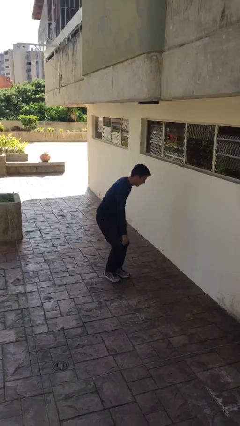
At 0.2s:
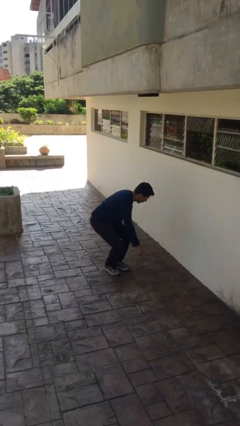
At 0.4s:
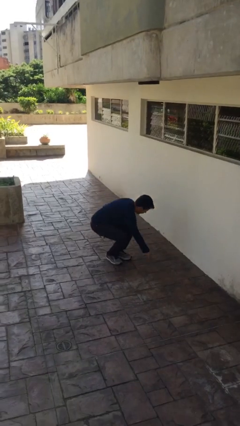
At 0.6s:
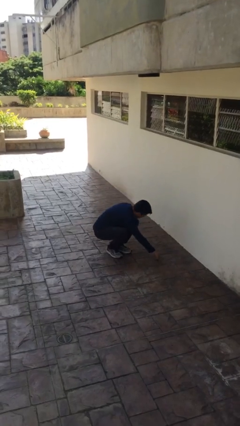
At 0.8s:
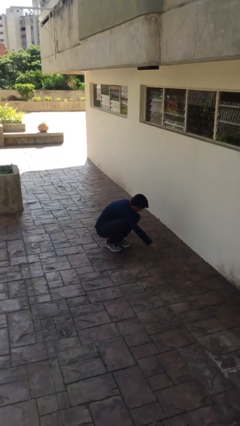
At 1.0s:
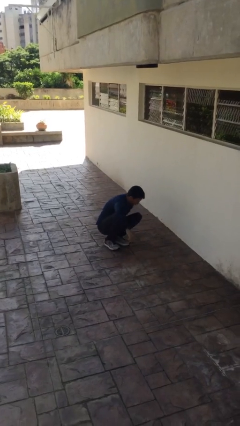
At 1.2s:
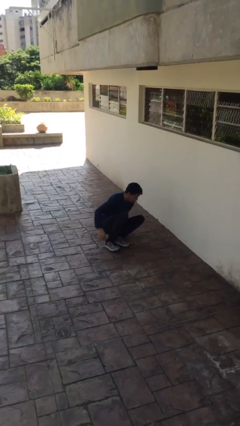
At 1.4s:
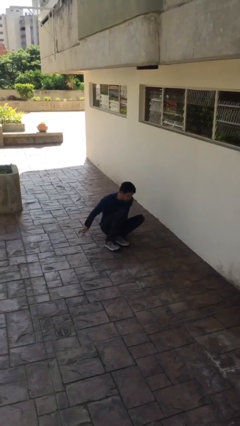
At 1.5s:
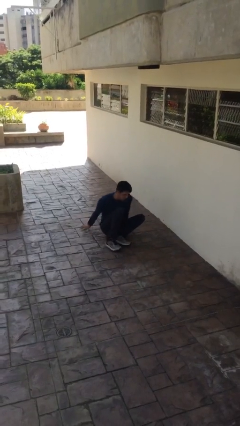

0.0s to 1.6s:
person sits down

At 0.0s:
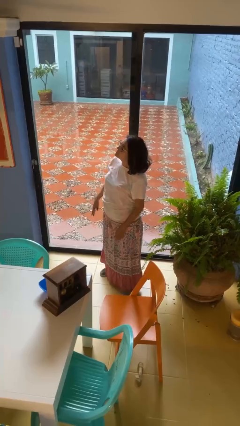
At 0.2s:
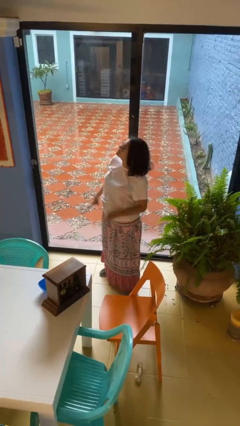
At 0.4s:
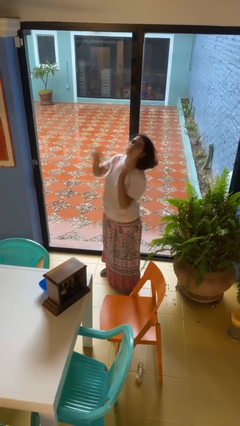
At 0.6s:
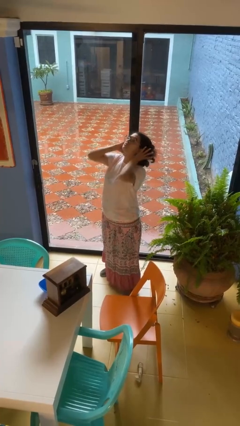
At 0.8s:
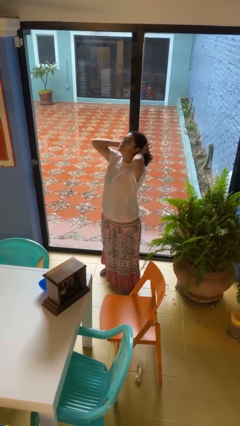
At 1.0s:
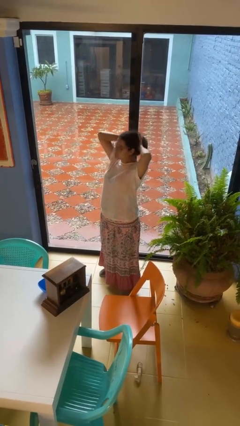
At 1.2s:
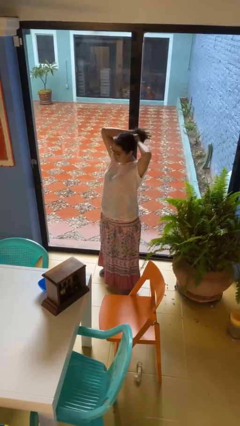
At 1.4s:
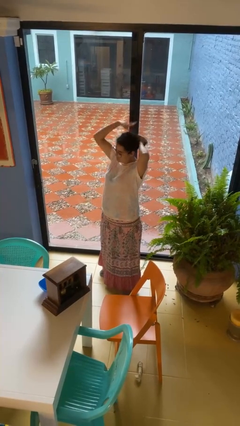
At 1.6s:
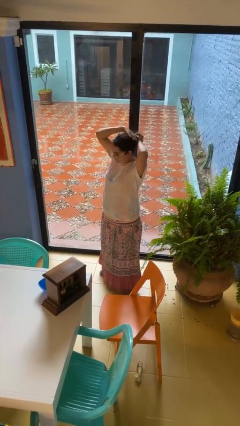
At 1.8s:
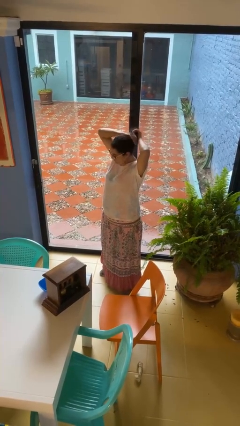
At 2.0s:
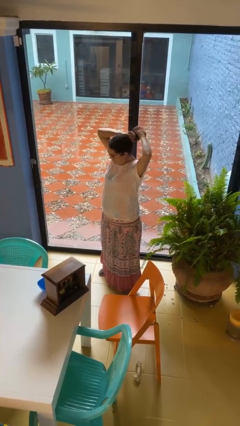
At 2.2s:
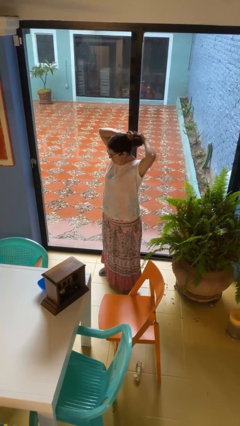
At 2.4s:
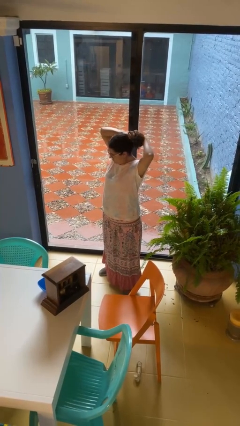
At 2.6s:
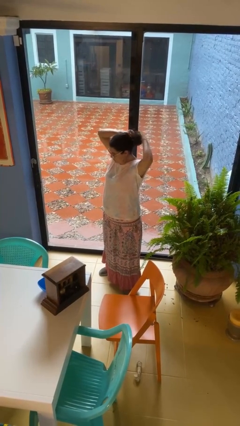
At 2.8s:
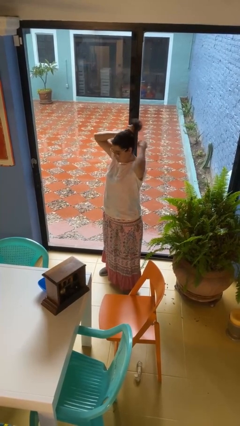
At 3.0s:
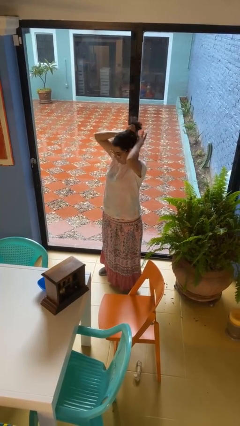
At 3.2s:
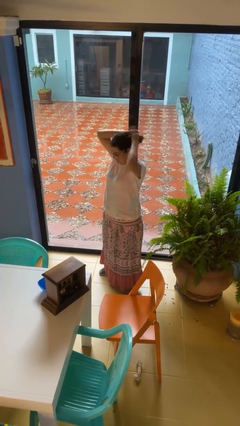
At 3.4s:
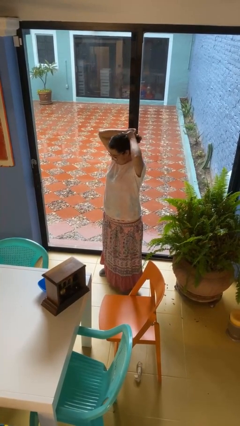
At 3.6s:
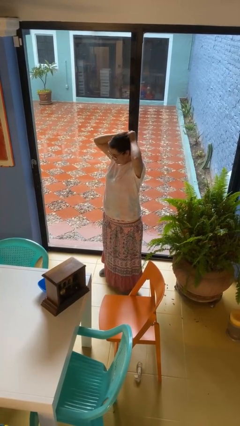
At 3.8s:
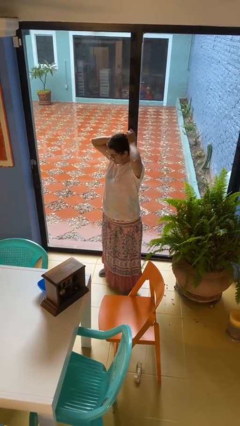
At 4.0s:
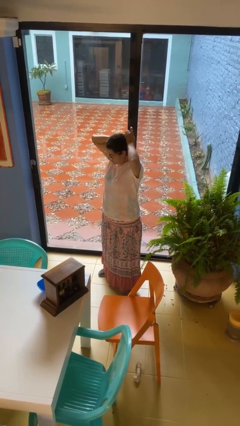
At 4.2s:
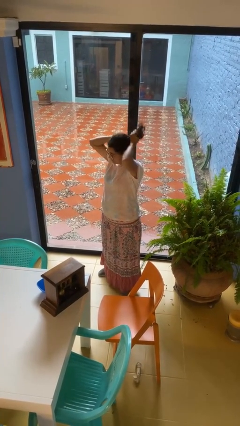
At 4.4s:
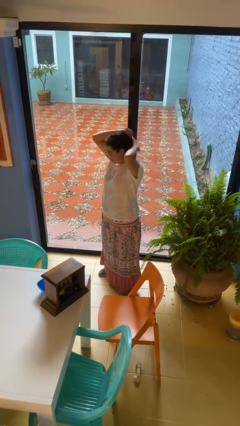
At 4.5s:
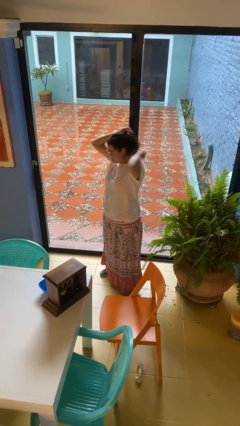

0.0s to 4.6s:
person puts hair in ponytail

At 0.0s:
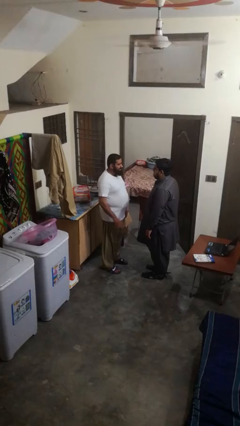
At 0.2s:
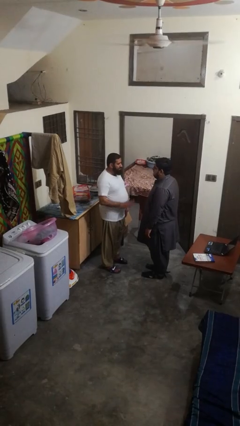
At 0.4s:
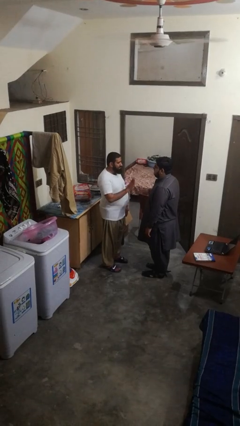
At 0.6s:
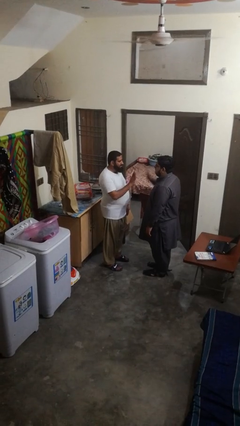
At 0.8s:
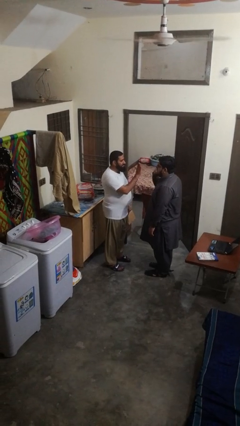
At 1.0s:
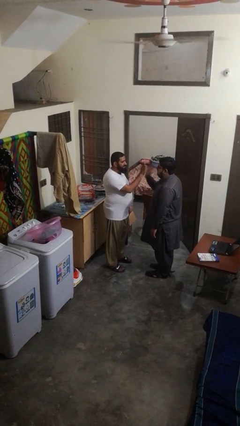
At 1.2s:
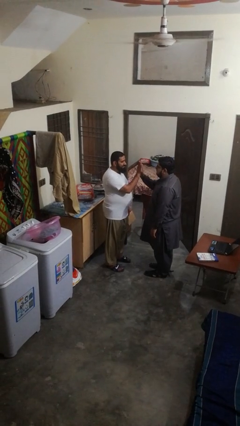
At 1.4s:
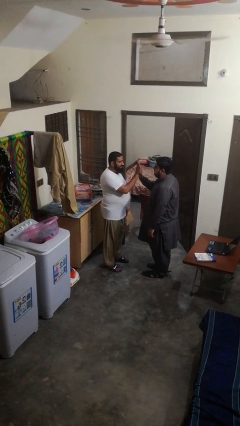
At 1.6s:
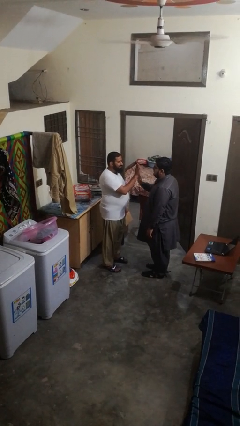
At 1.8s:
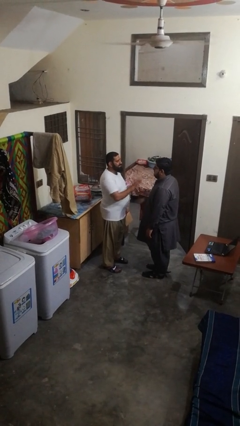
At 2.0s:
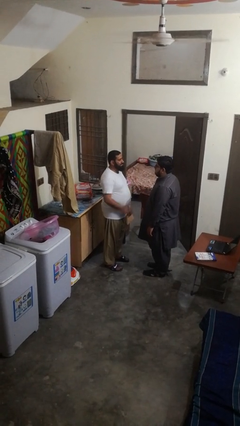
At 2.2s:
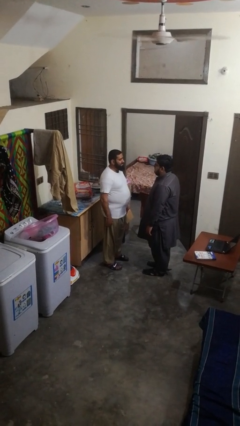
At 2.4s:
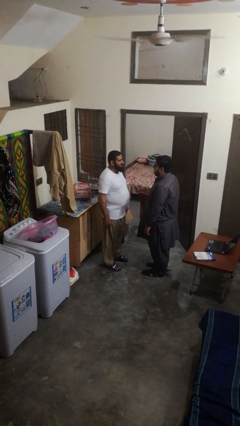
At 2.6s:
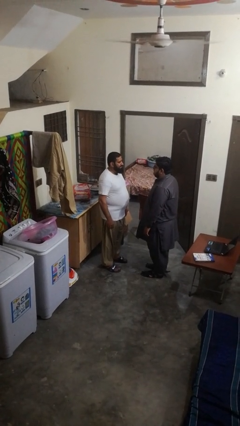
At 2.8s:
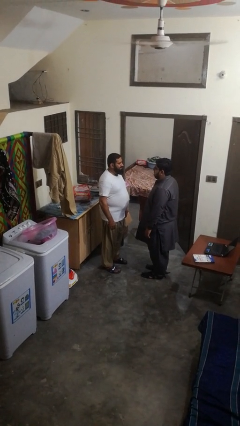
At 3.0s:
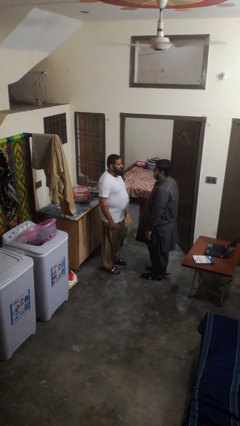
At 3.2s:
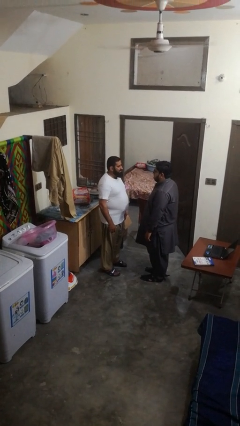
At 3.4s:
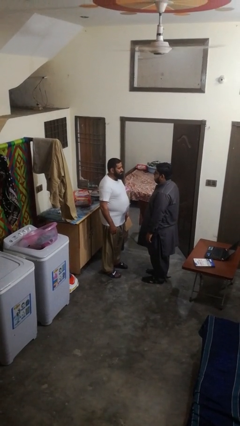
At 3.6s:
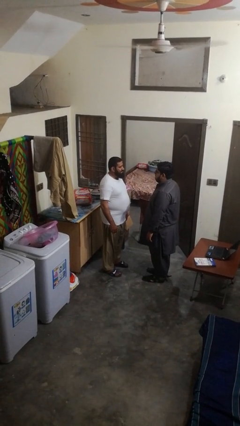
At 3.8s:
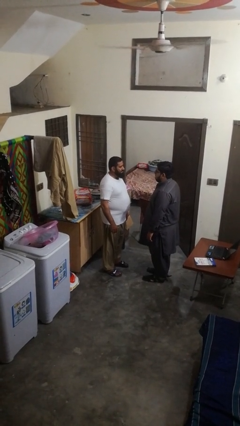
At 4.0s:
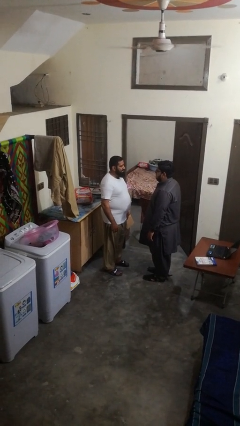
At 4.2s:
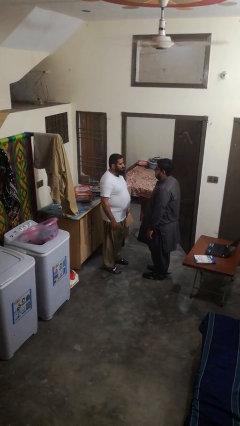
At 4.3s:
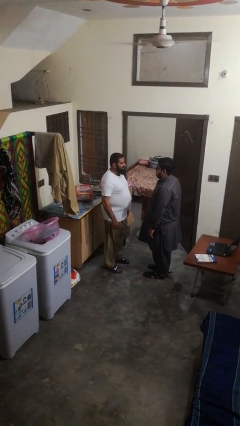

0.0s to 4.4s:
person highfives hand

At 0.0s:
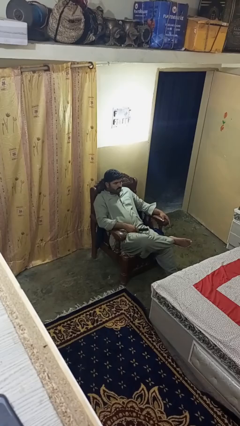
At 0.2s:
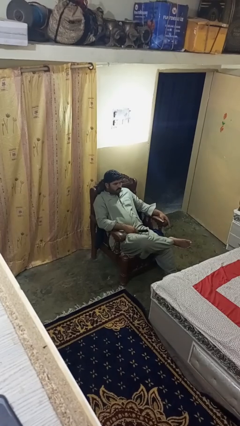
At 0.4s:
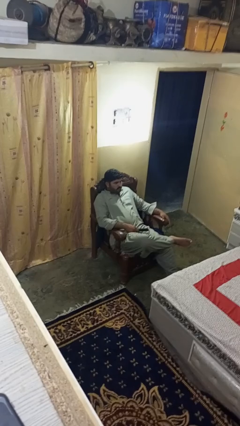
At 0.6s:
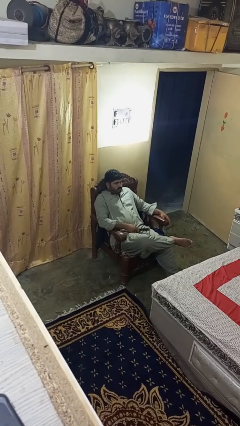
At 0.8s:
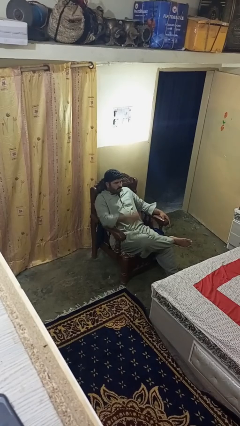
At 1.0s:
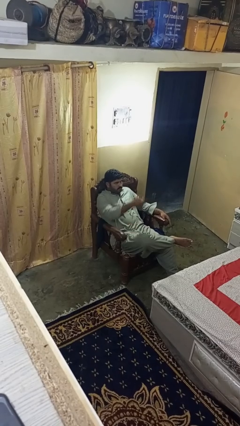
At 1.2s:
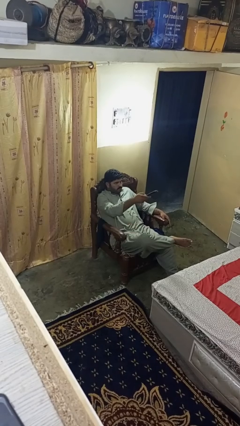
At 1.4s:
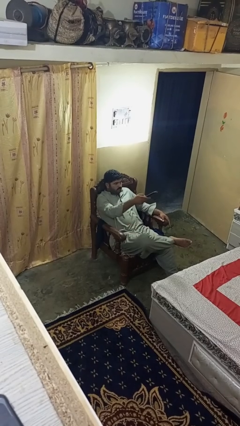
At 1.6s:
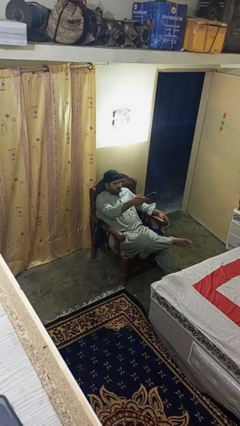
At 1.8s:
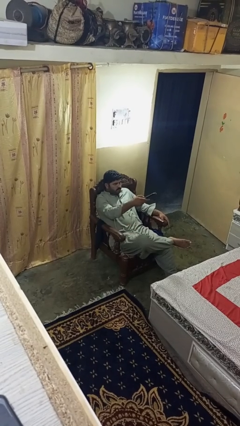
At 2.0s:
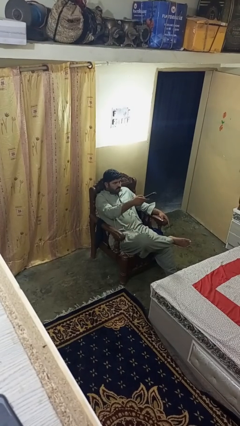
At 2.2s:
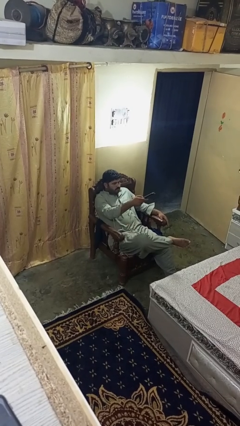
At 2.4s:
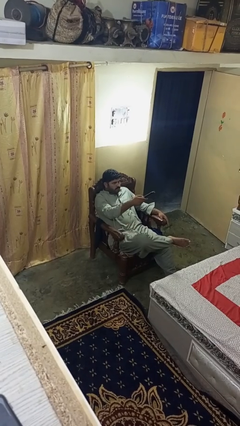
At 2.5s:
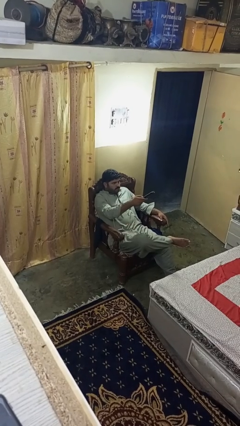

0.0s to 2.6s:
person uses television remote

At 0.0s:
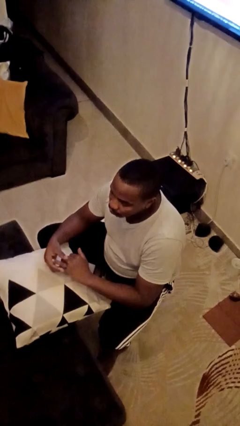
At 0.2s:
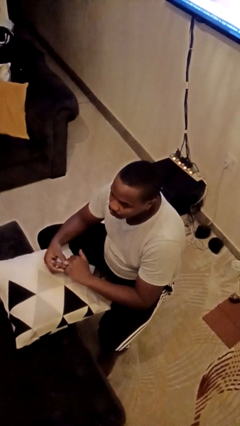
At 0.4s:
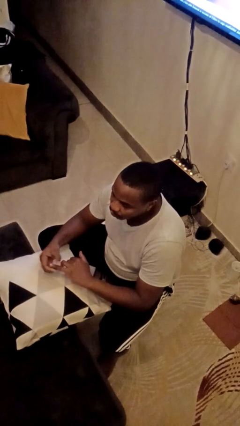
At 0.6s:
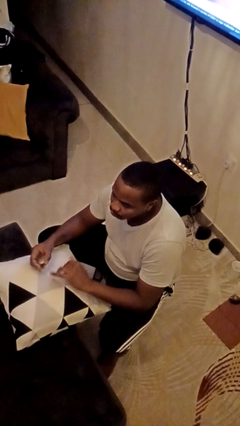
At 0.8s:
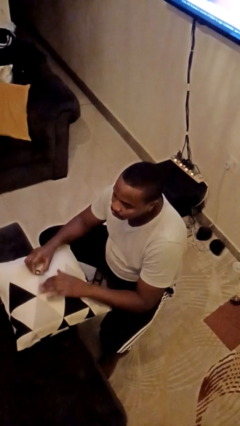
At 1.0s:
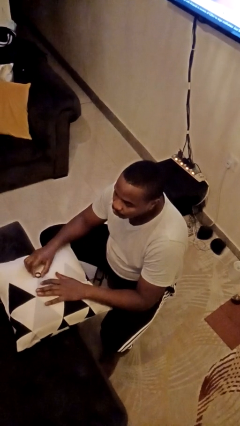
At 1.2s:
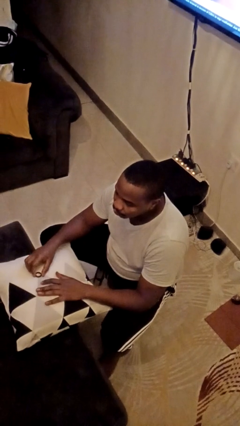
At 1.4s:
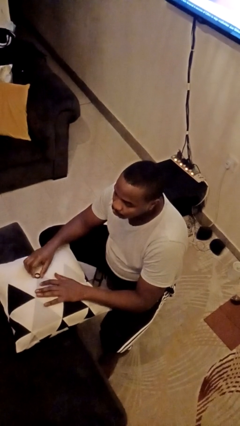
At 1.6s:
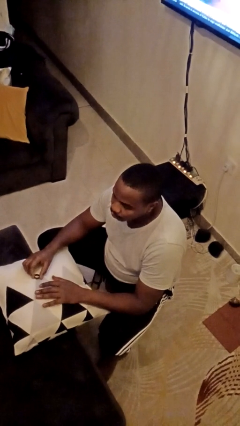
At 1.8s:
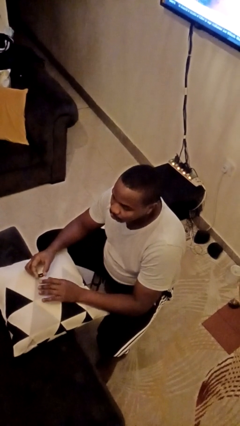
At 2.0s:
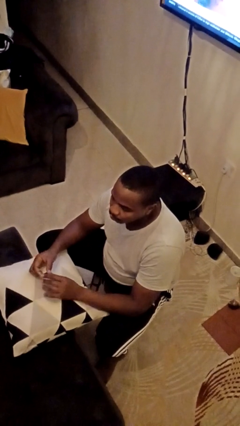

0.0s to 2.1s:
person takes off ring

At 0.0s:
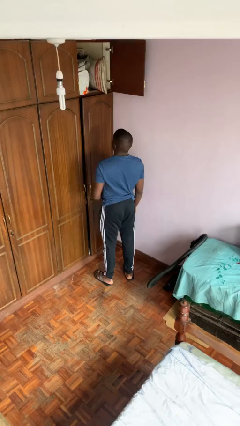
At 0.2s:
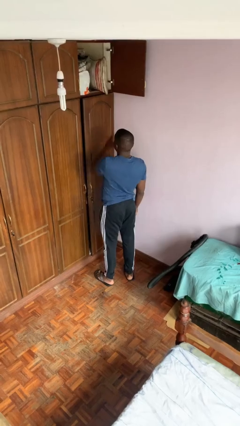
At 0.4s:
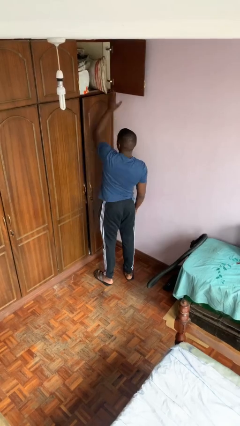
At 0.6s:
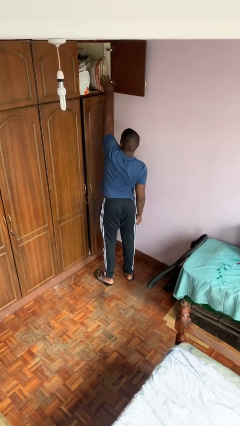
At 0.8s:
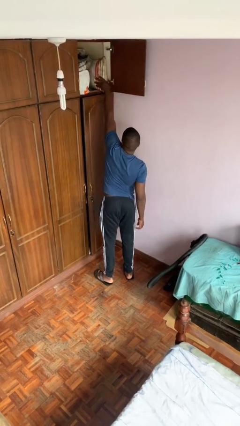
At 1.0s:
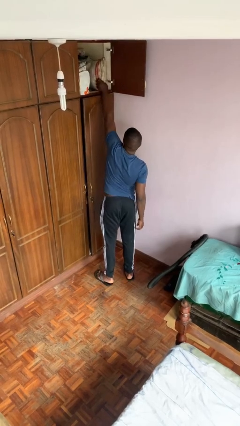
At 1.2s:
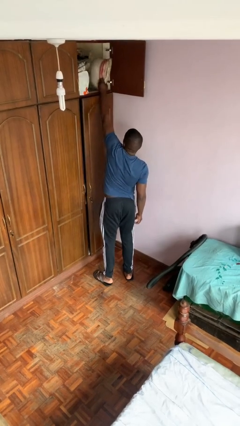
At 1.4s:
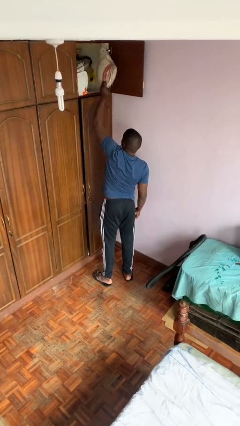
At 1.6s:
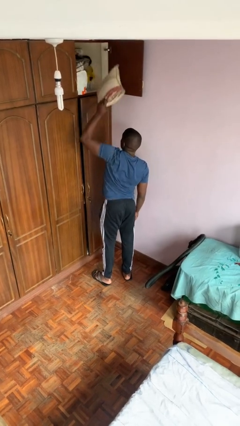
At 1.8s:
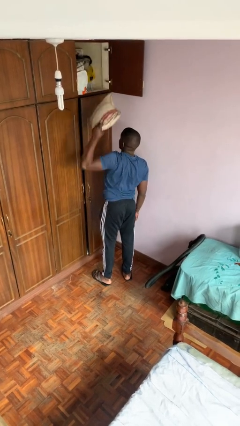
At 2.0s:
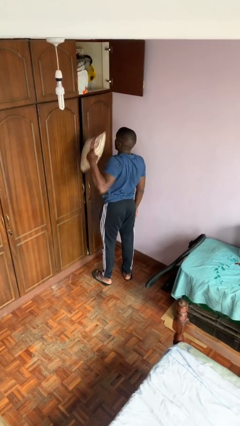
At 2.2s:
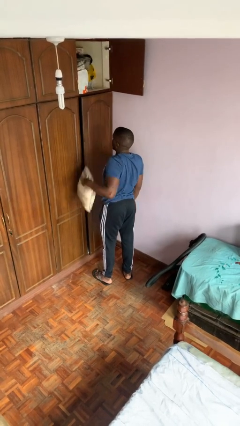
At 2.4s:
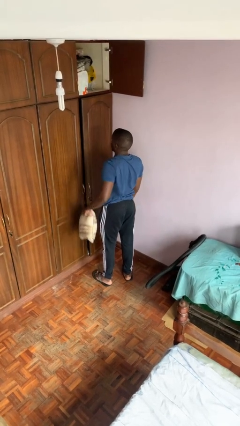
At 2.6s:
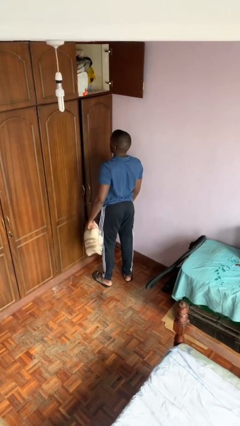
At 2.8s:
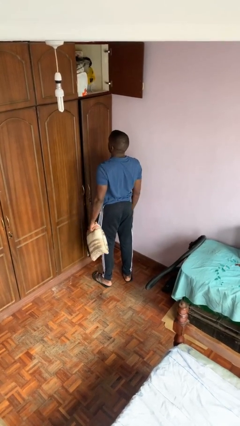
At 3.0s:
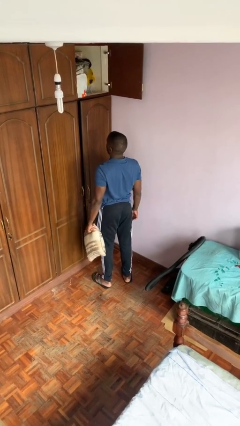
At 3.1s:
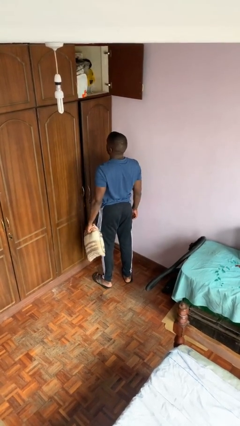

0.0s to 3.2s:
person picks up object from shelf
